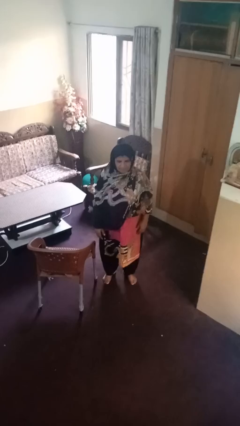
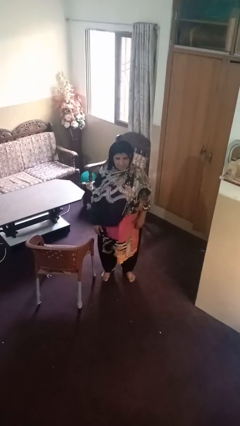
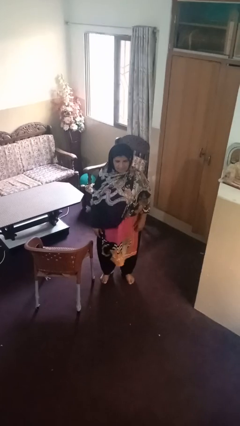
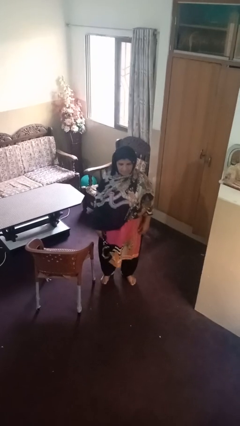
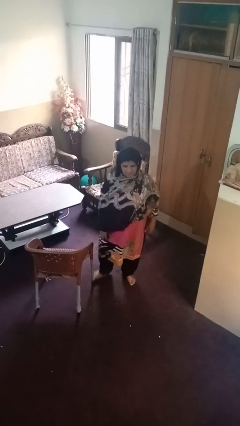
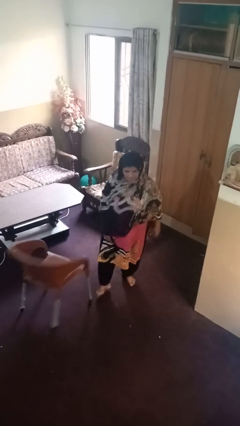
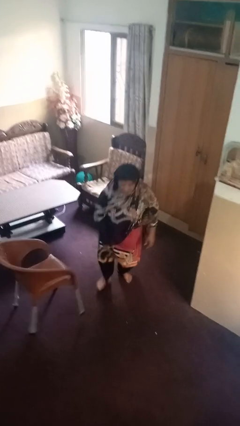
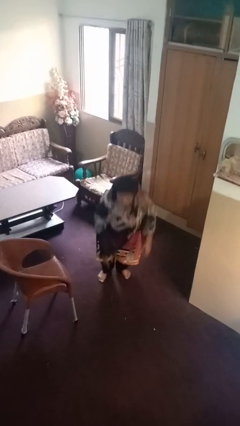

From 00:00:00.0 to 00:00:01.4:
person trips on object on floor

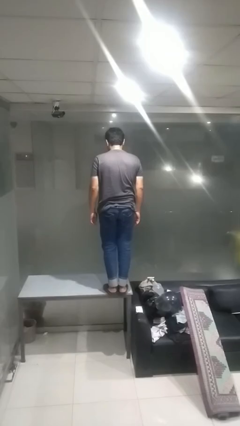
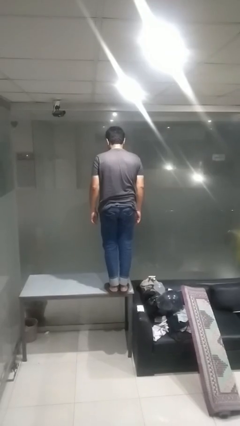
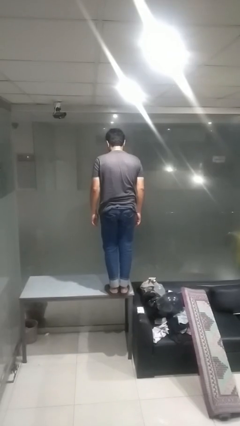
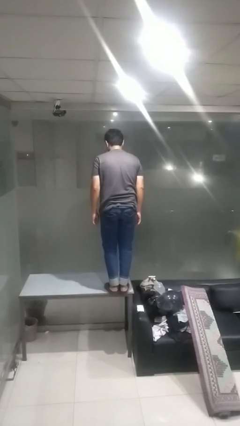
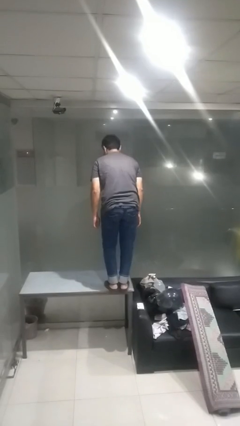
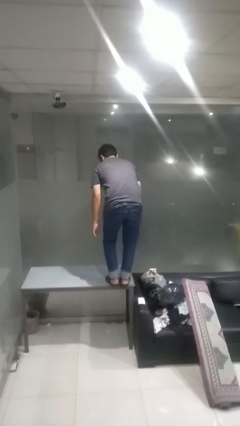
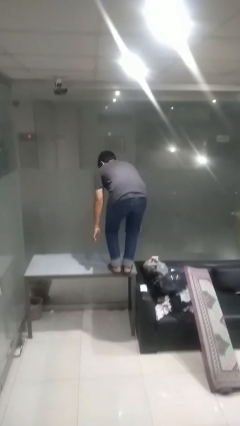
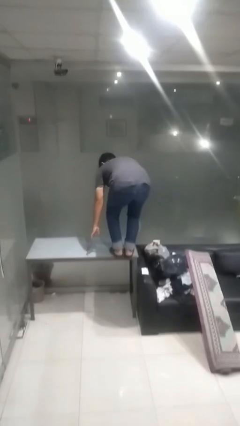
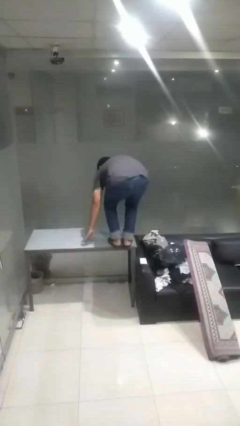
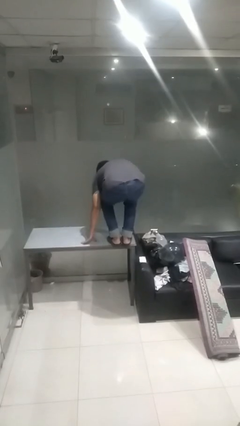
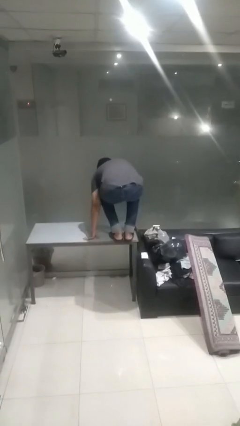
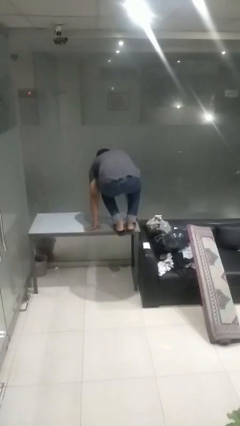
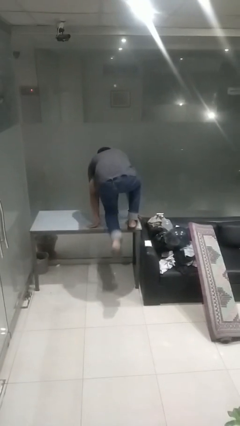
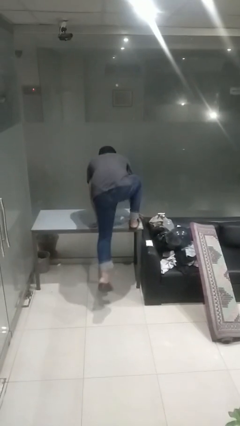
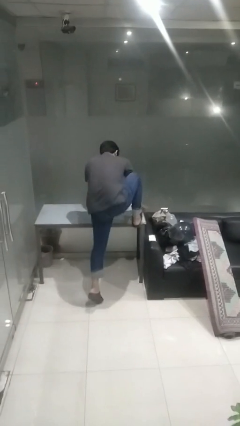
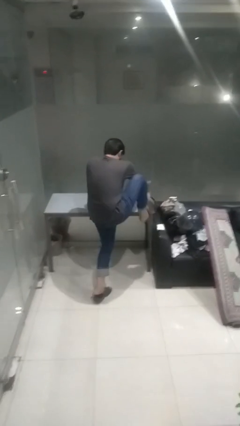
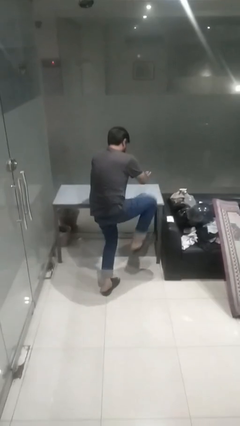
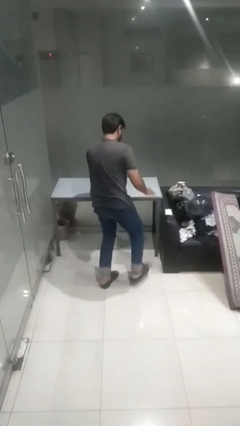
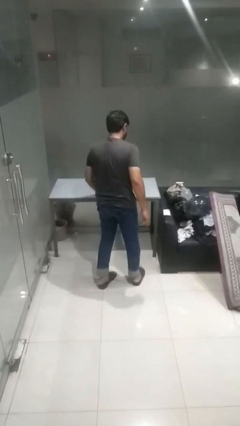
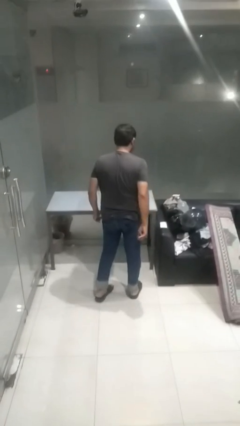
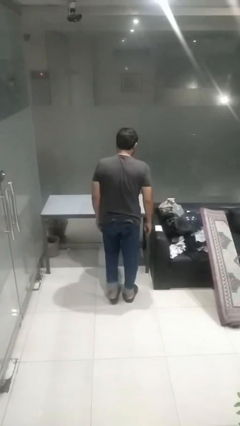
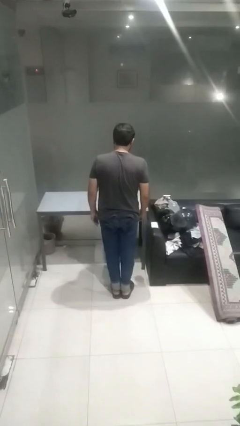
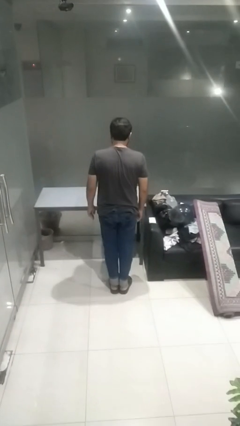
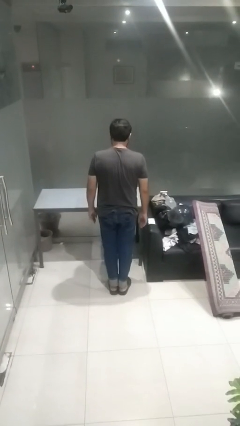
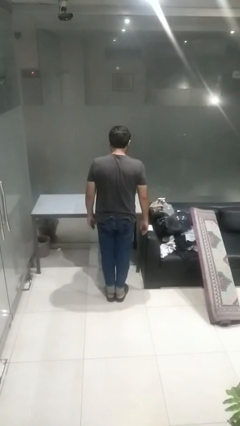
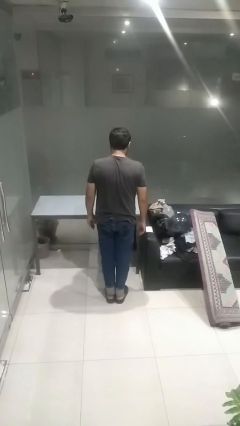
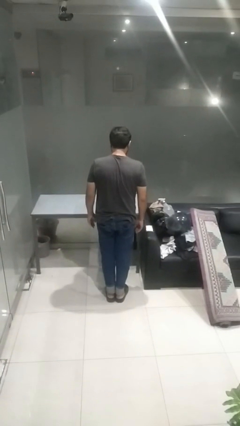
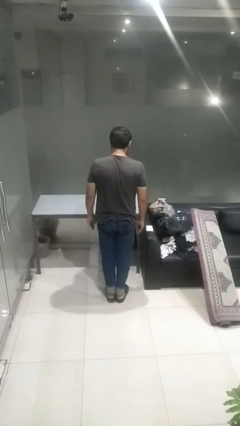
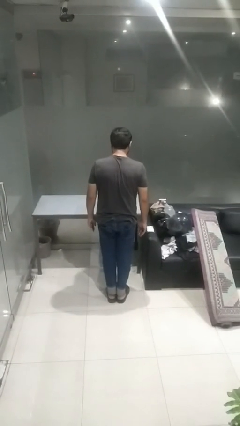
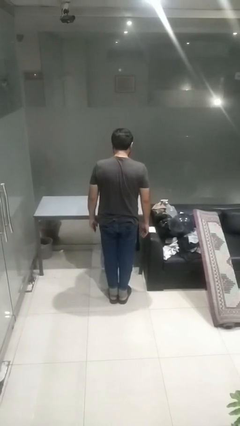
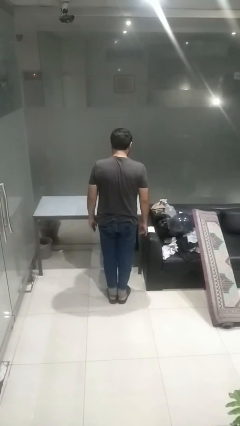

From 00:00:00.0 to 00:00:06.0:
person climbs off table

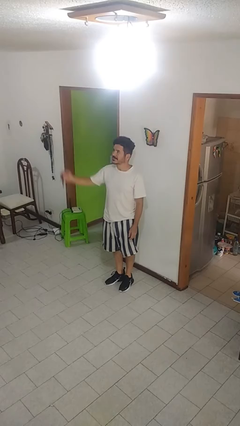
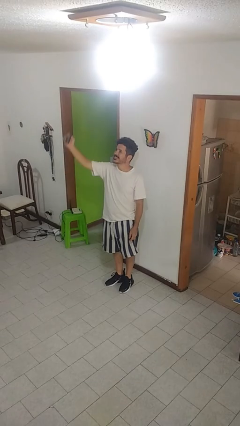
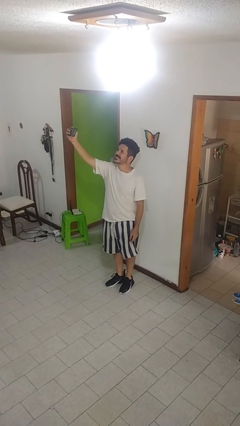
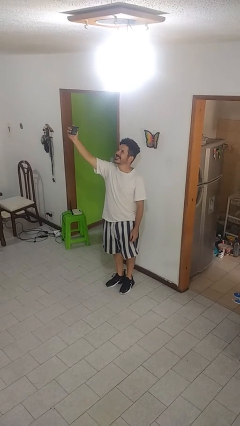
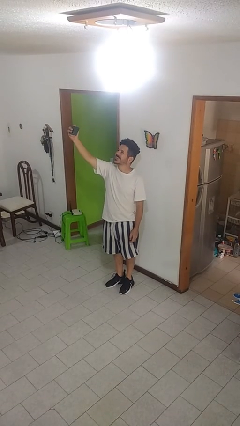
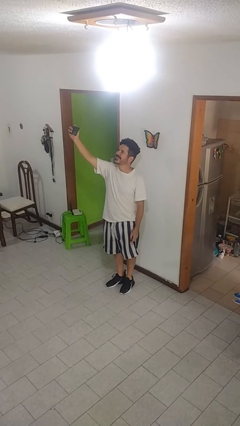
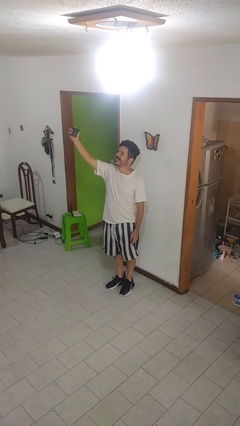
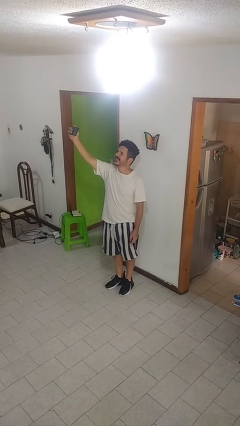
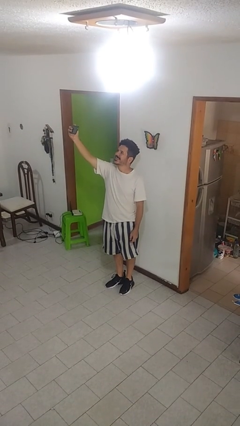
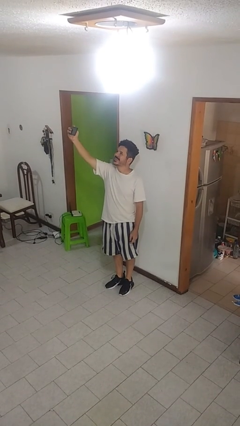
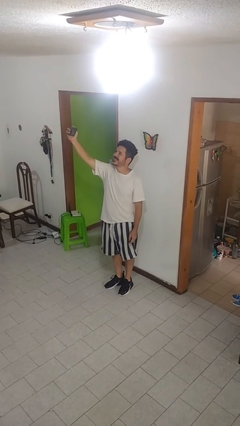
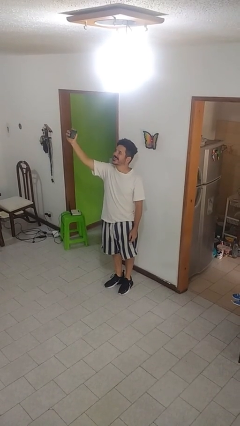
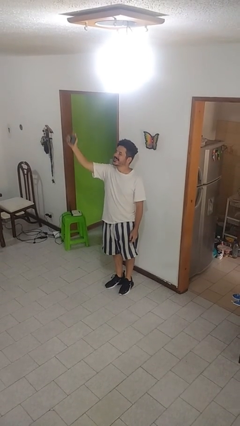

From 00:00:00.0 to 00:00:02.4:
person takes selfie

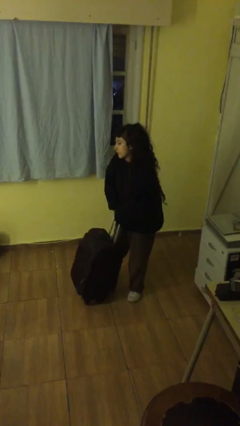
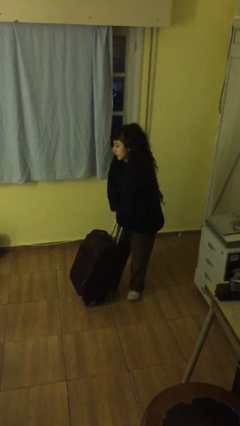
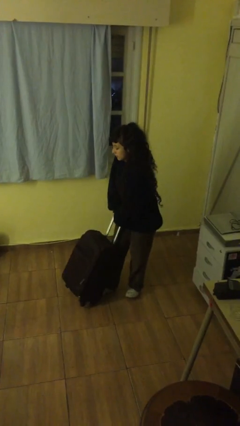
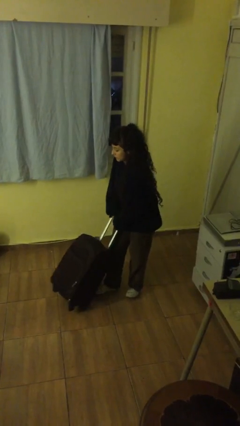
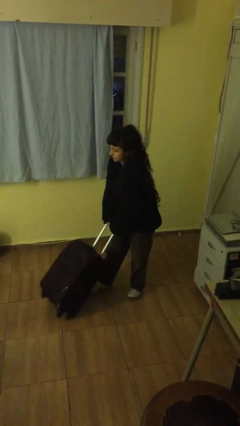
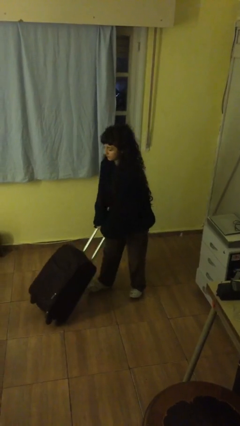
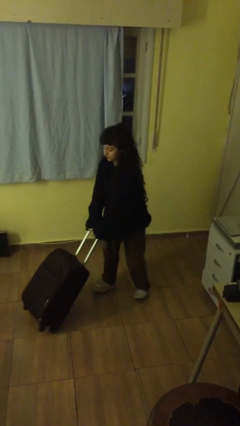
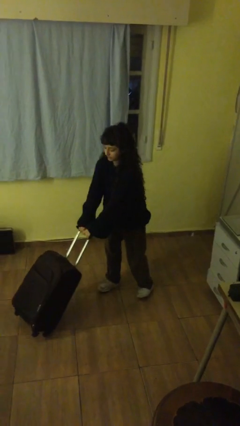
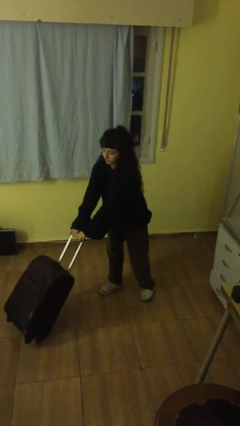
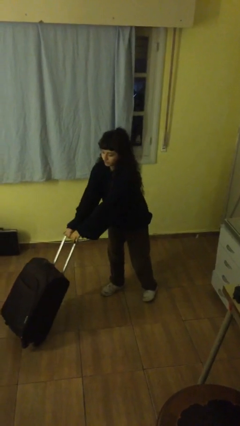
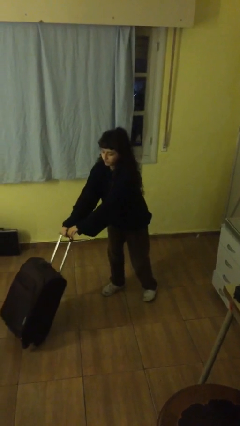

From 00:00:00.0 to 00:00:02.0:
person pushes wheeled cart

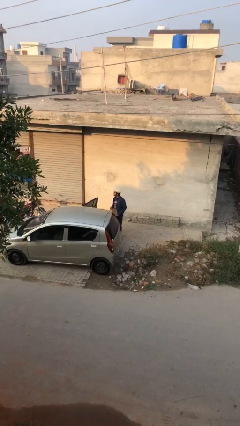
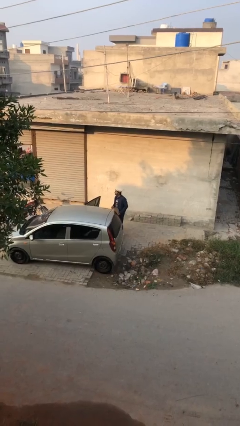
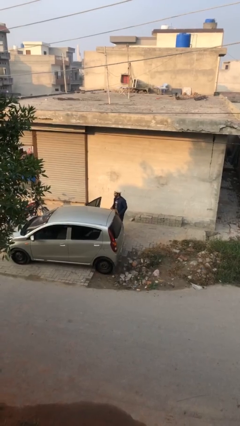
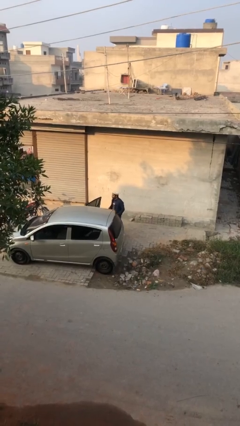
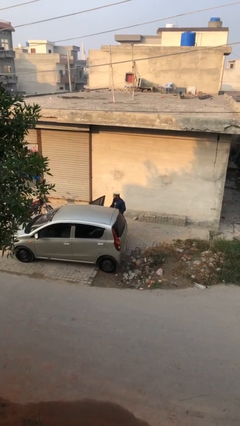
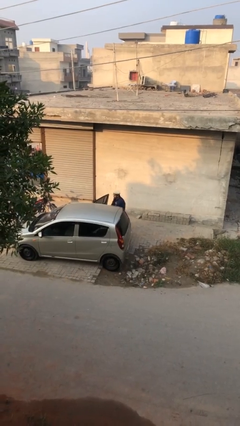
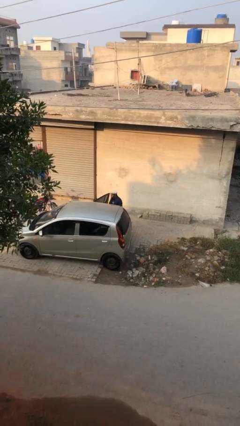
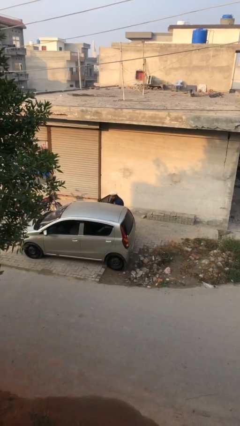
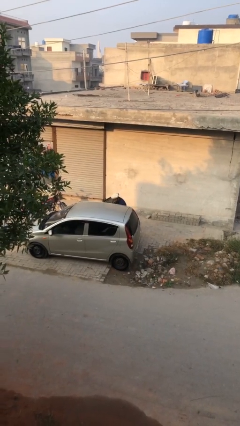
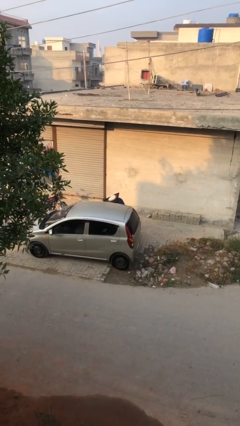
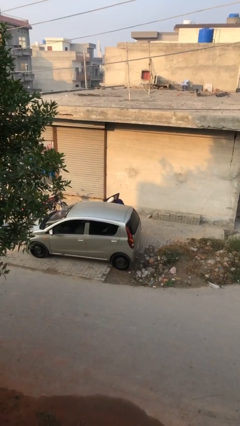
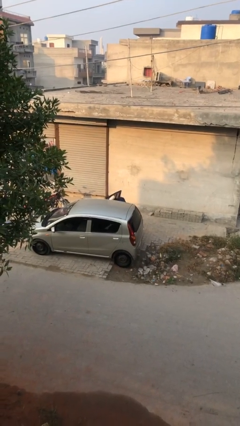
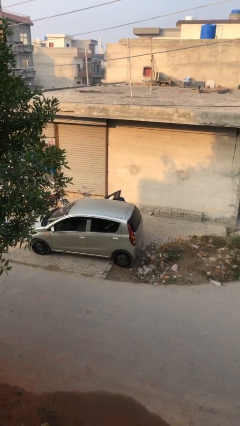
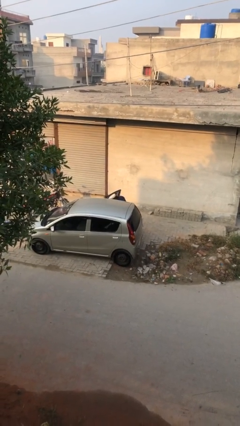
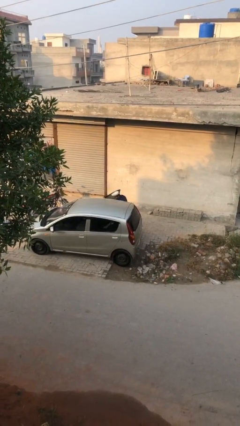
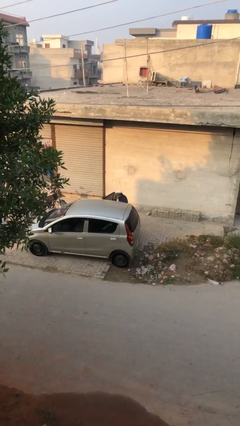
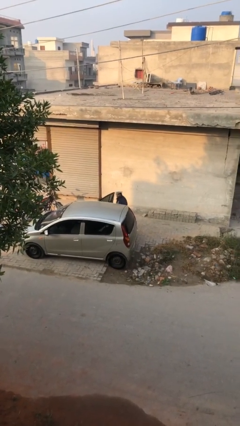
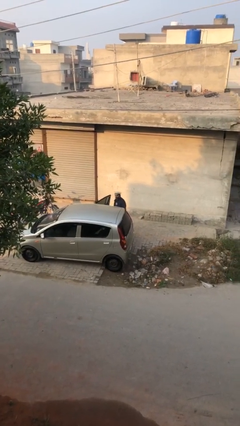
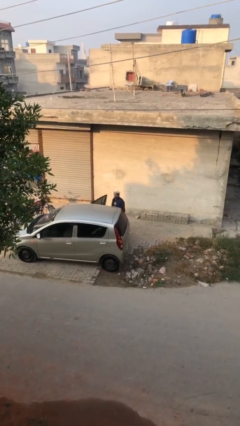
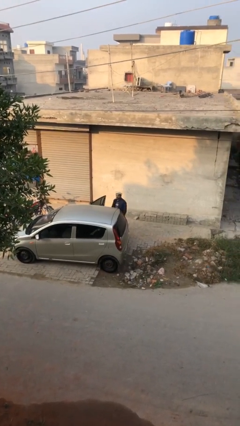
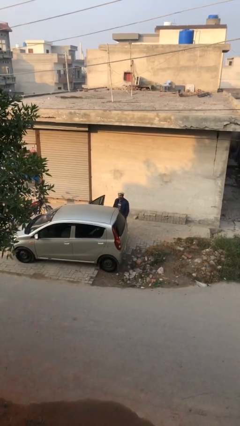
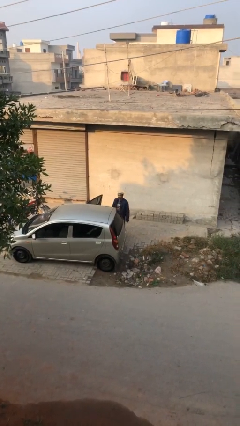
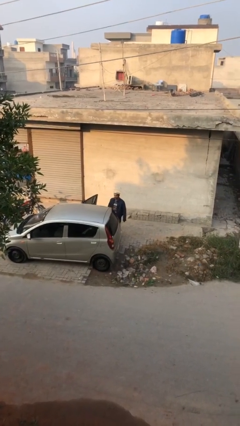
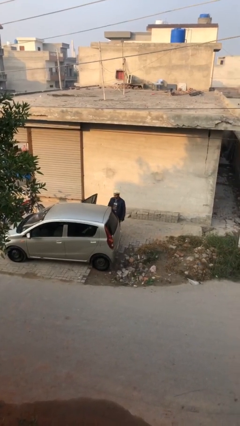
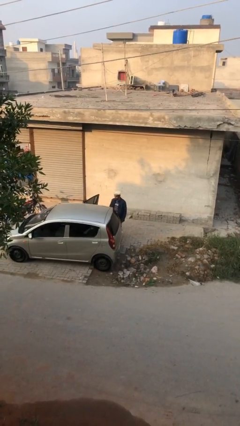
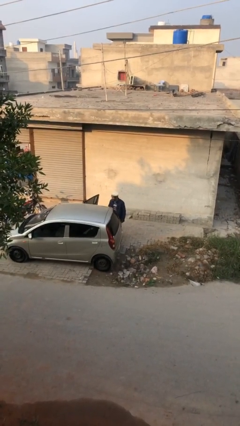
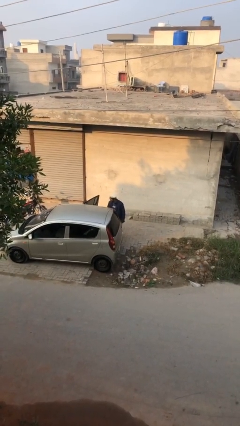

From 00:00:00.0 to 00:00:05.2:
person loads car

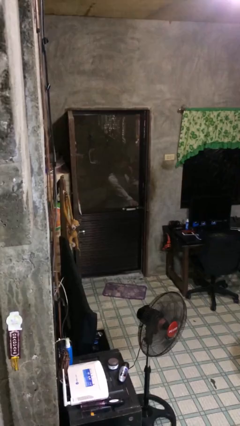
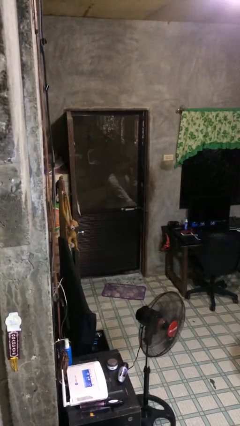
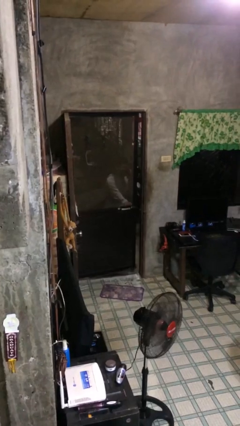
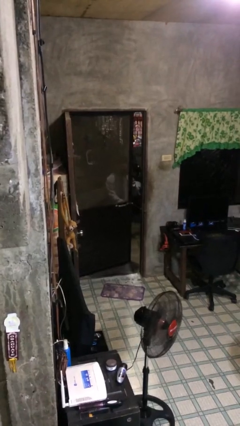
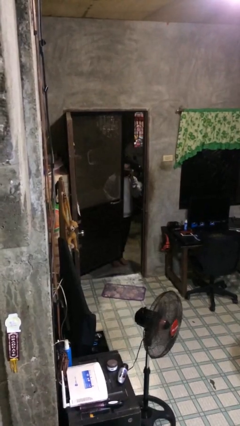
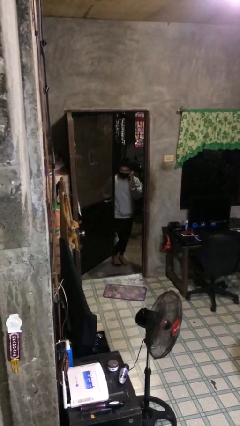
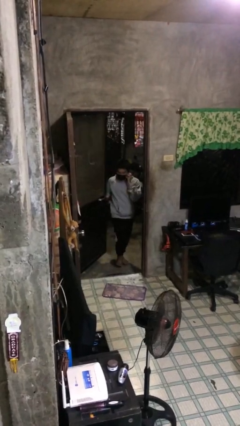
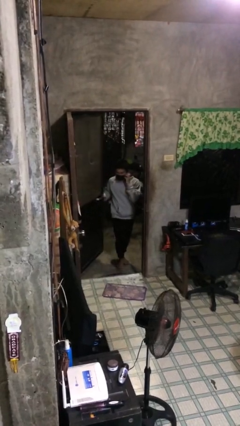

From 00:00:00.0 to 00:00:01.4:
person opens facility door
